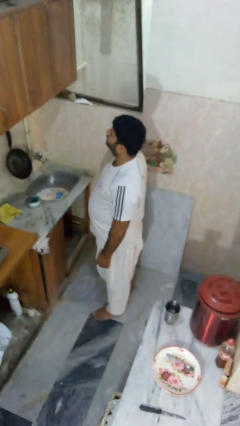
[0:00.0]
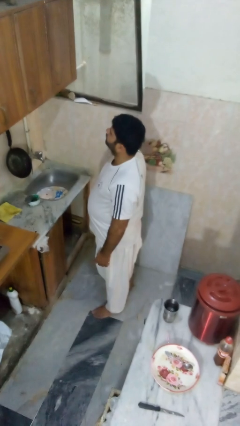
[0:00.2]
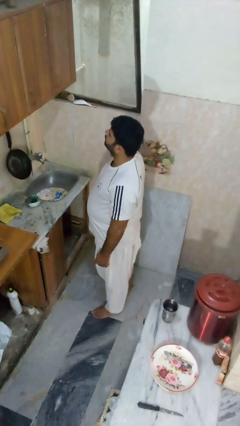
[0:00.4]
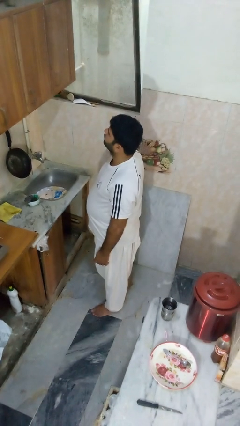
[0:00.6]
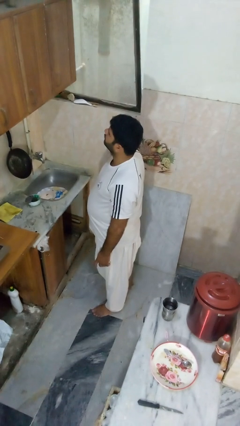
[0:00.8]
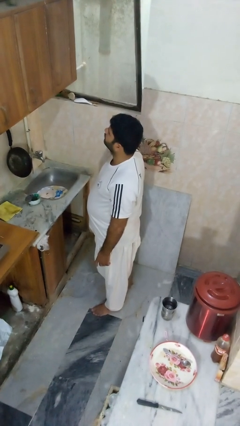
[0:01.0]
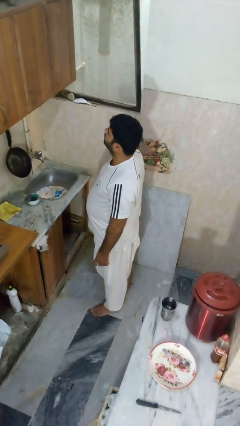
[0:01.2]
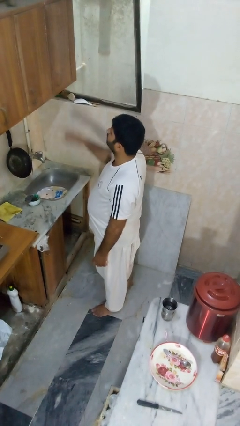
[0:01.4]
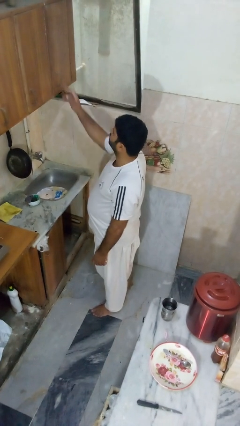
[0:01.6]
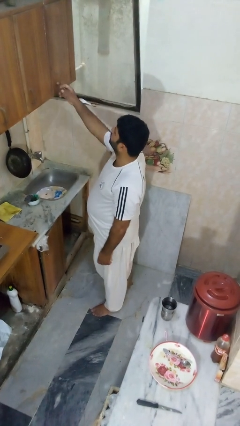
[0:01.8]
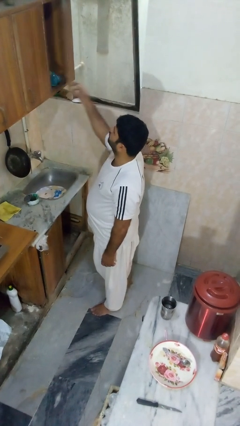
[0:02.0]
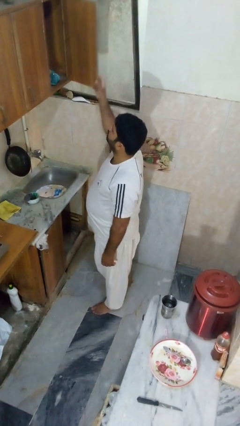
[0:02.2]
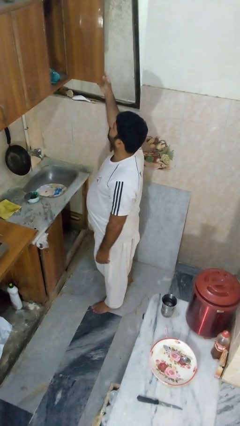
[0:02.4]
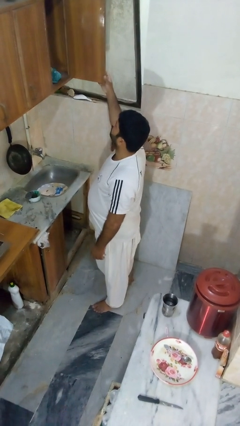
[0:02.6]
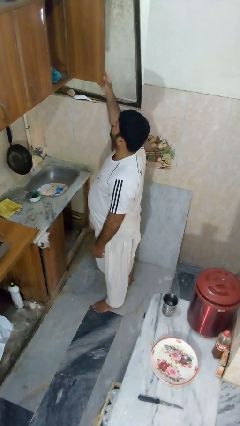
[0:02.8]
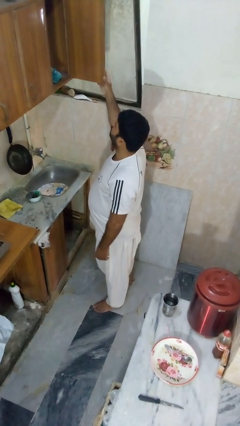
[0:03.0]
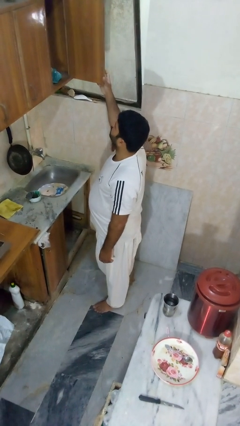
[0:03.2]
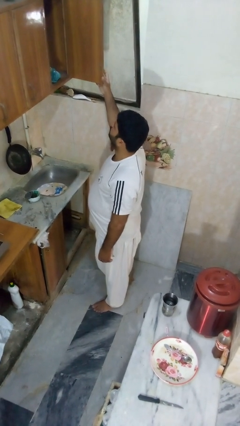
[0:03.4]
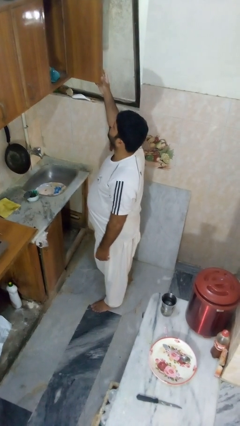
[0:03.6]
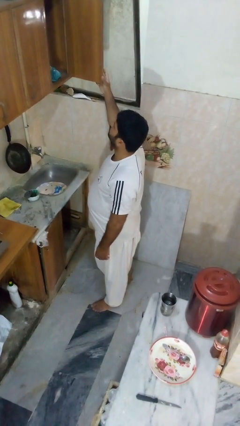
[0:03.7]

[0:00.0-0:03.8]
person opens cabinet

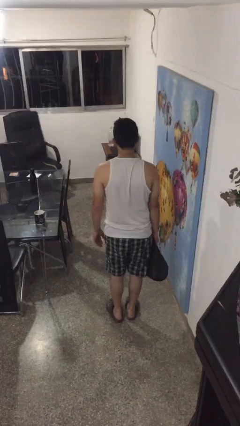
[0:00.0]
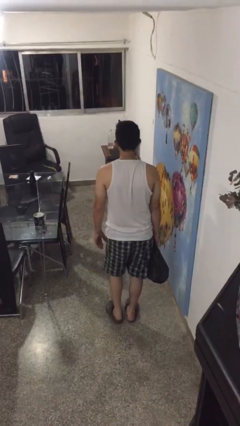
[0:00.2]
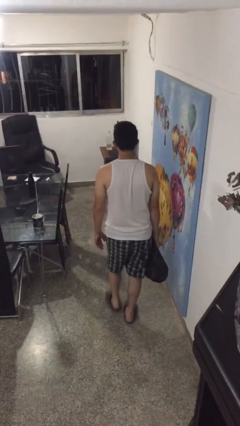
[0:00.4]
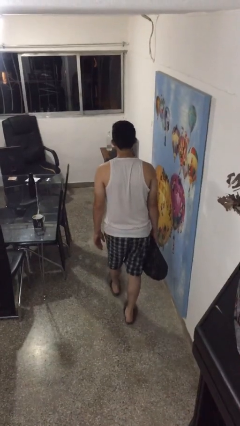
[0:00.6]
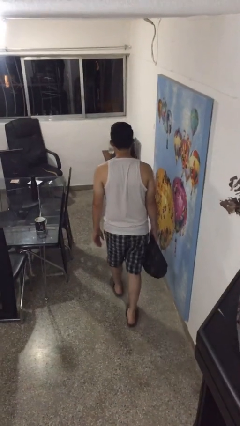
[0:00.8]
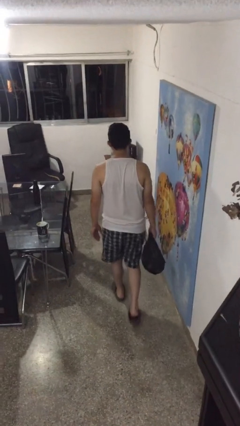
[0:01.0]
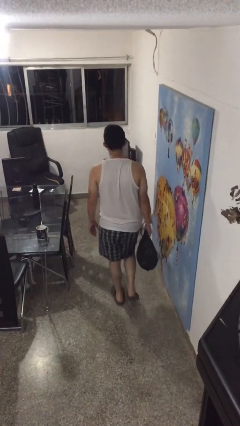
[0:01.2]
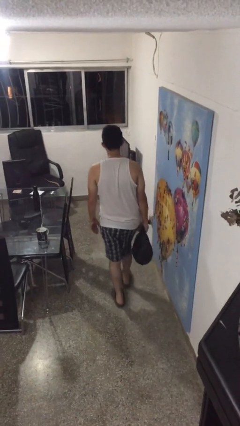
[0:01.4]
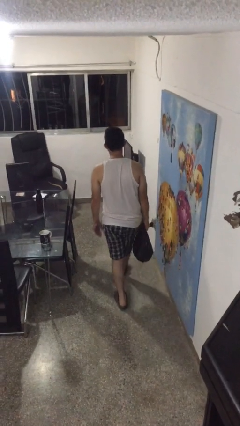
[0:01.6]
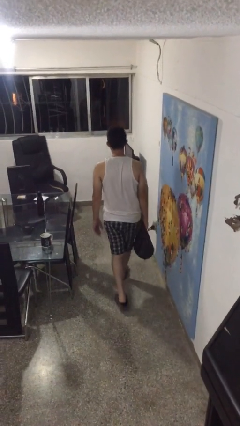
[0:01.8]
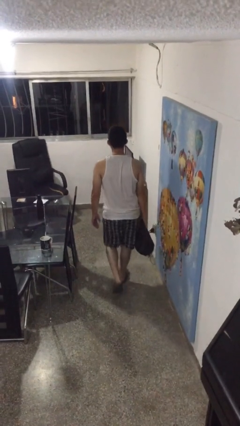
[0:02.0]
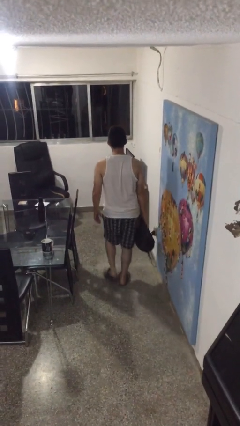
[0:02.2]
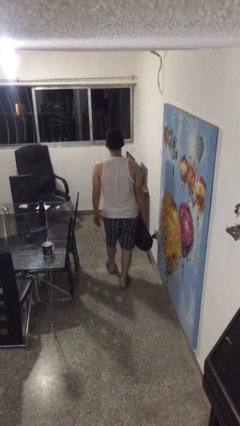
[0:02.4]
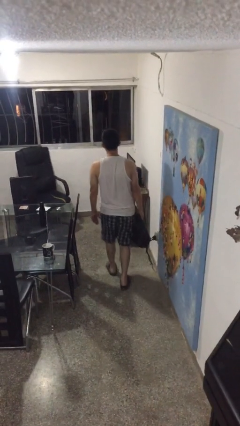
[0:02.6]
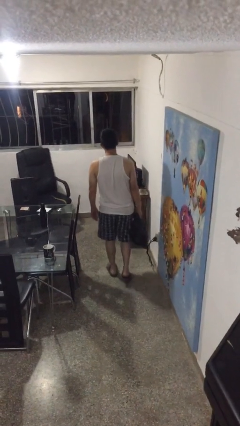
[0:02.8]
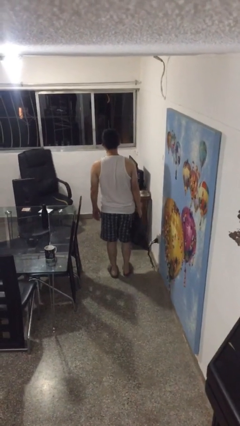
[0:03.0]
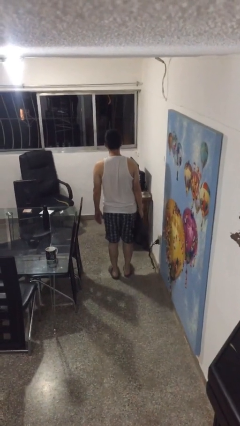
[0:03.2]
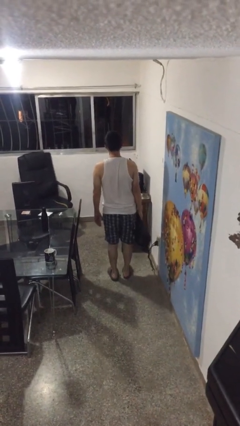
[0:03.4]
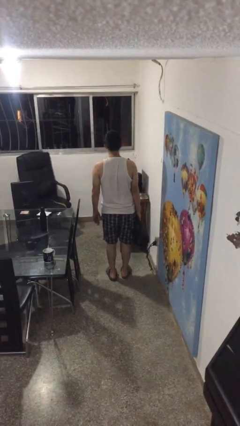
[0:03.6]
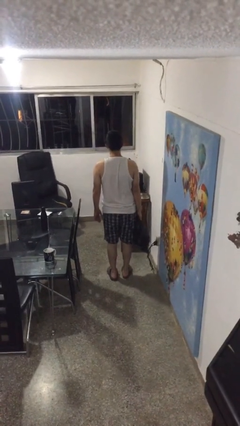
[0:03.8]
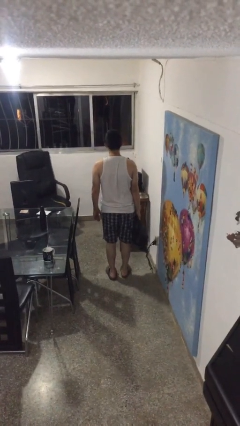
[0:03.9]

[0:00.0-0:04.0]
person carries groceries

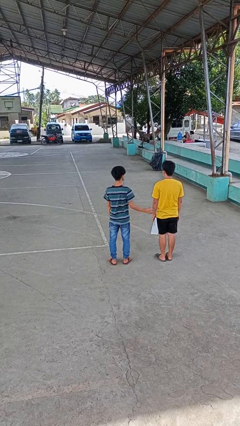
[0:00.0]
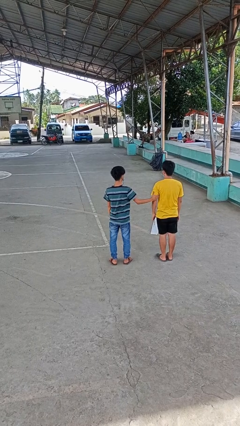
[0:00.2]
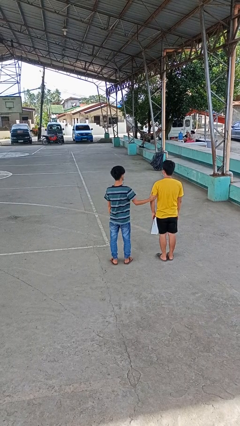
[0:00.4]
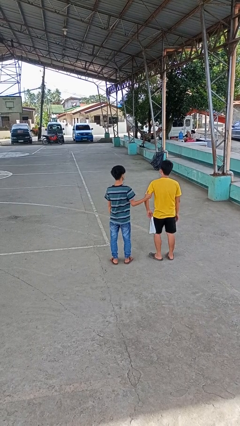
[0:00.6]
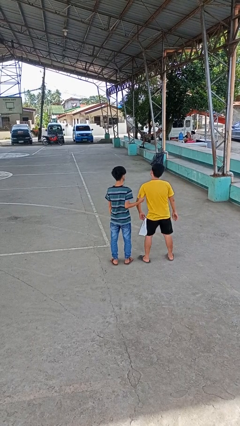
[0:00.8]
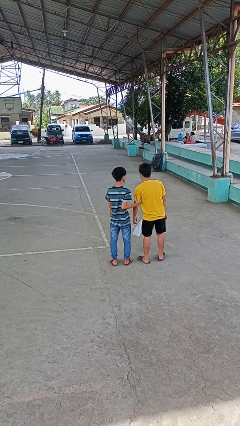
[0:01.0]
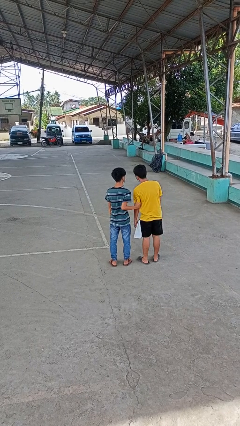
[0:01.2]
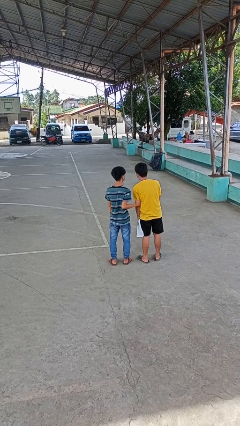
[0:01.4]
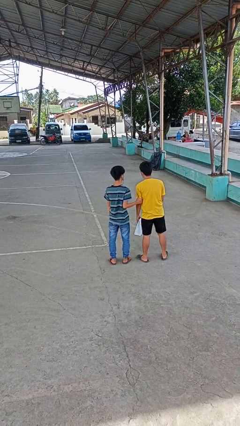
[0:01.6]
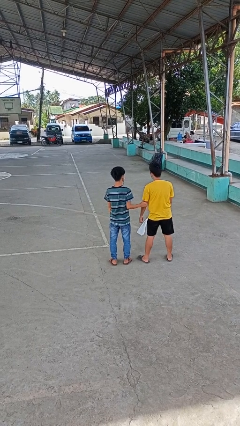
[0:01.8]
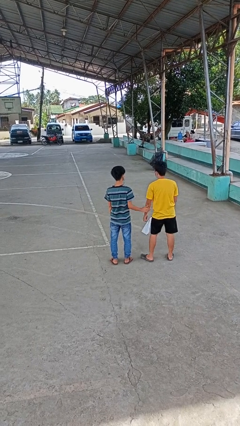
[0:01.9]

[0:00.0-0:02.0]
person grabs person by bicep

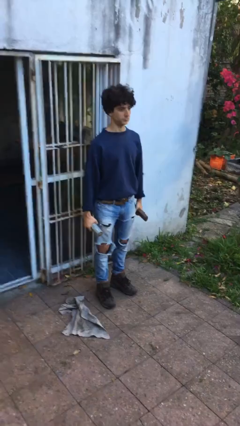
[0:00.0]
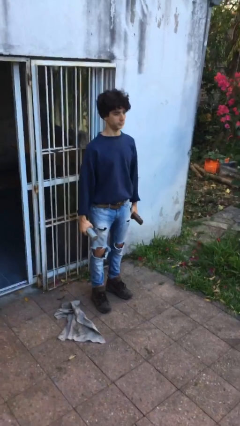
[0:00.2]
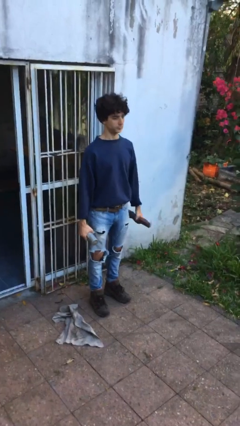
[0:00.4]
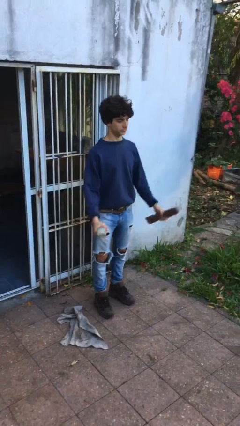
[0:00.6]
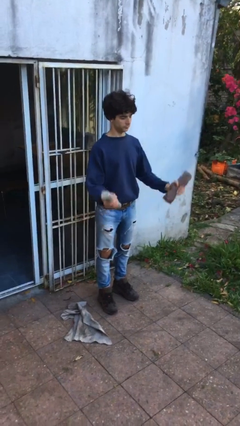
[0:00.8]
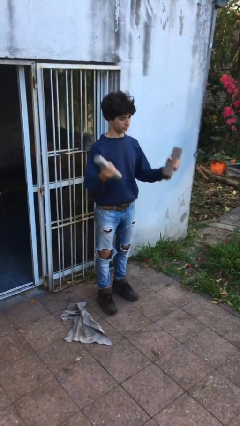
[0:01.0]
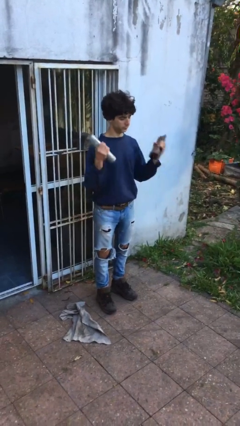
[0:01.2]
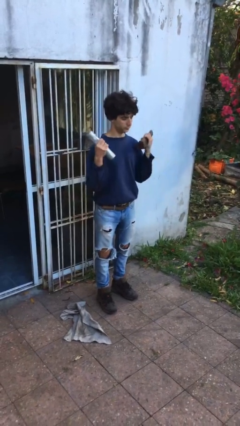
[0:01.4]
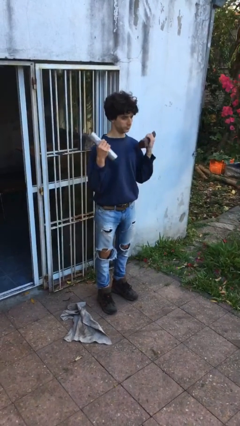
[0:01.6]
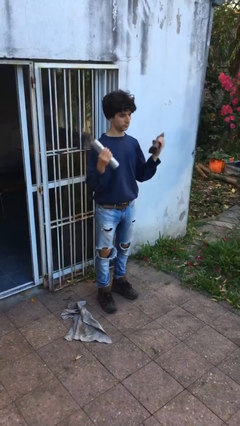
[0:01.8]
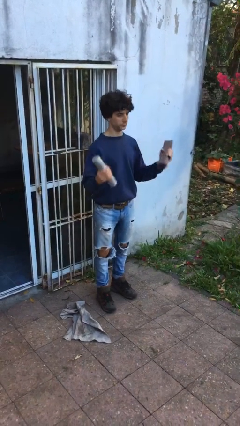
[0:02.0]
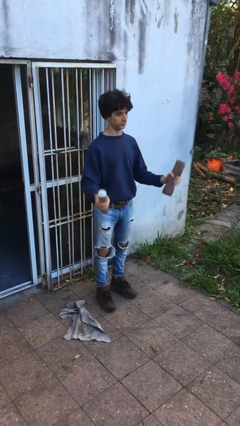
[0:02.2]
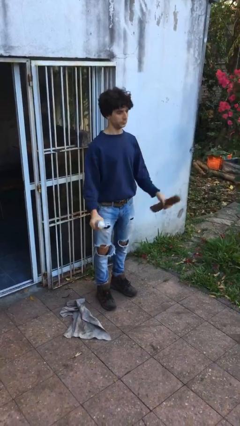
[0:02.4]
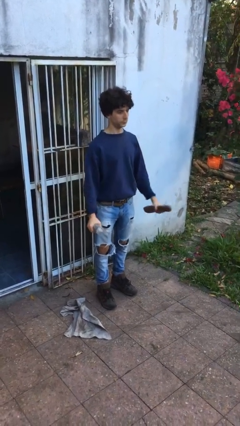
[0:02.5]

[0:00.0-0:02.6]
person lifts dumbbells

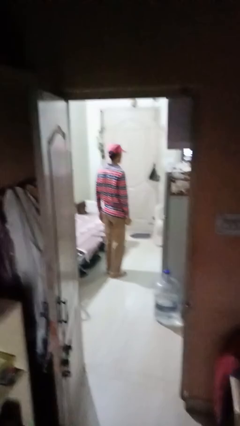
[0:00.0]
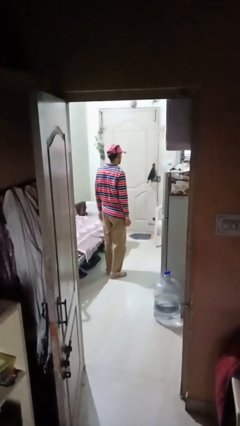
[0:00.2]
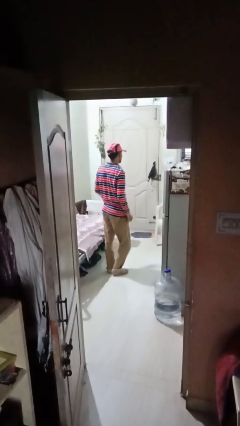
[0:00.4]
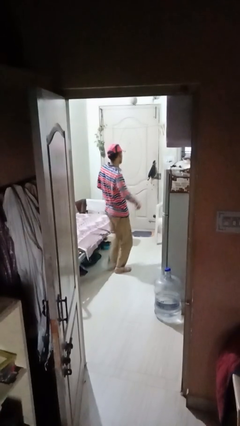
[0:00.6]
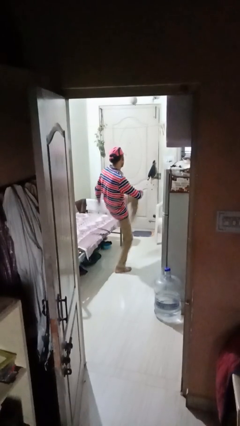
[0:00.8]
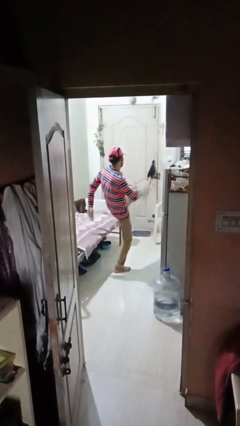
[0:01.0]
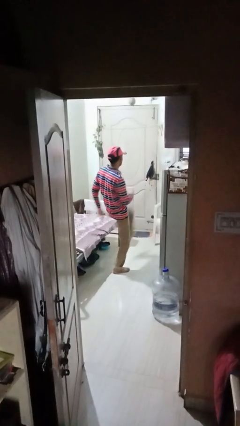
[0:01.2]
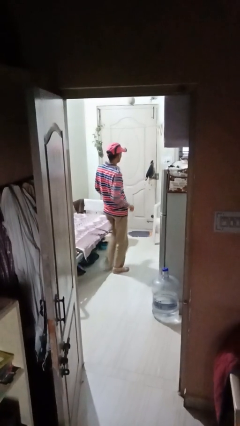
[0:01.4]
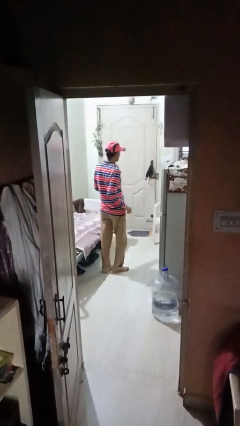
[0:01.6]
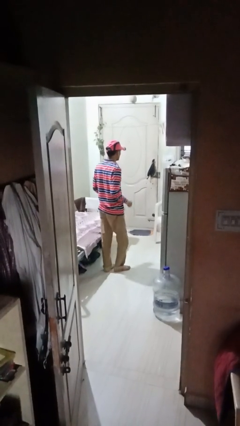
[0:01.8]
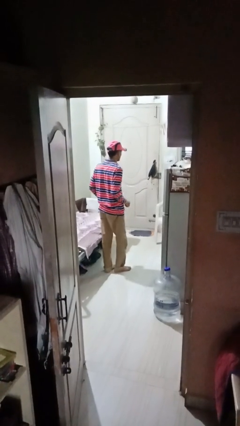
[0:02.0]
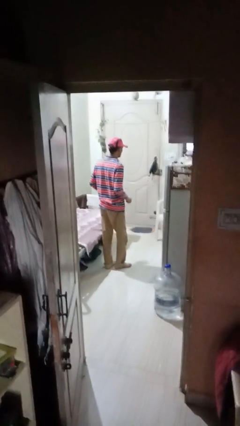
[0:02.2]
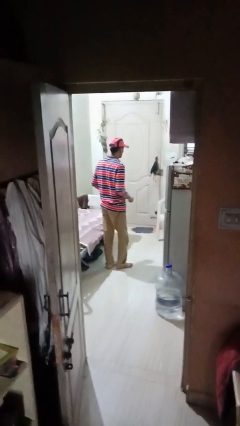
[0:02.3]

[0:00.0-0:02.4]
person karate kicks

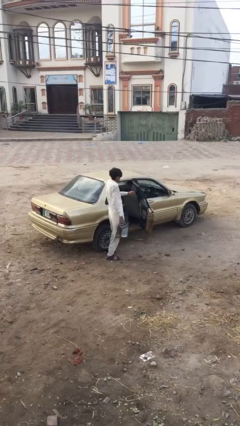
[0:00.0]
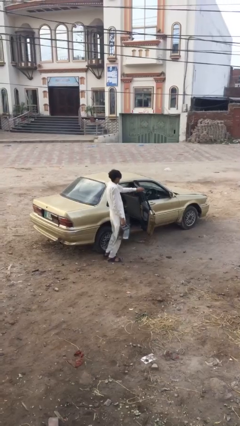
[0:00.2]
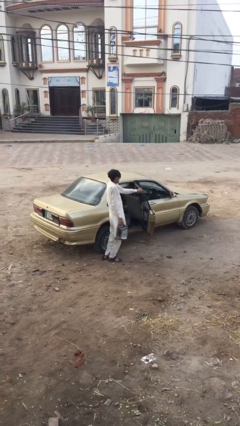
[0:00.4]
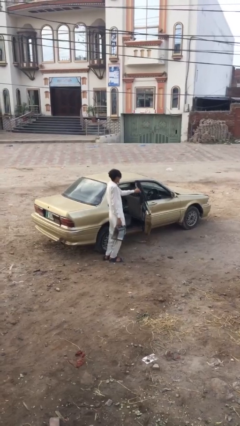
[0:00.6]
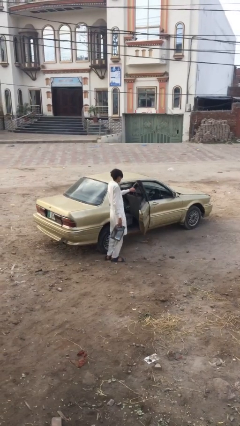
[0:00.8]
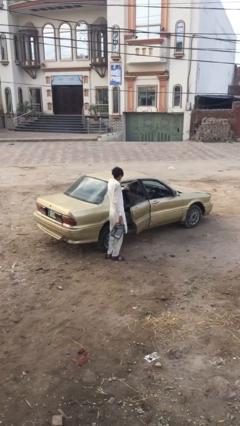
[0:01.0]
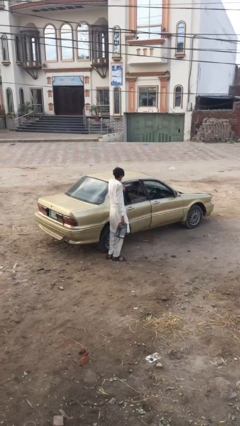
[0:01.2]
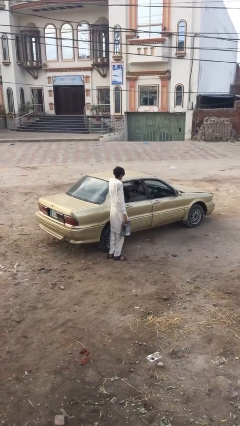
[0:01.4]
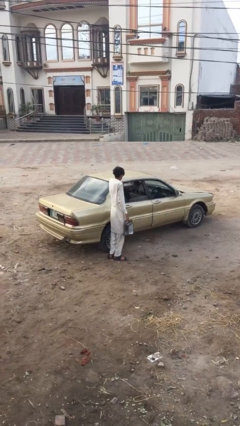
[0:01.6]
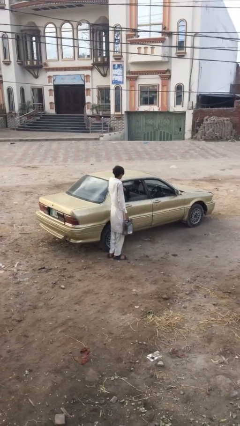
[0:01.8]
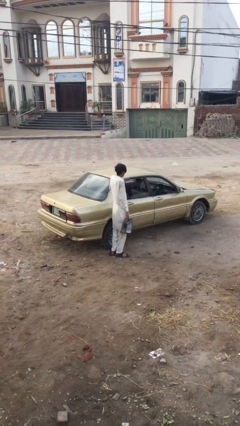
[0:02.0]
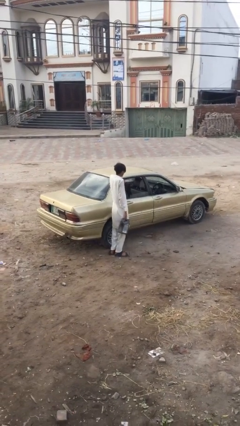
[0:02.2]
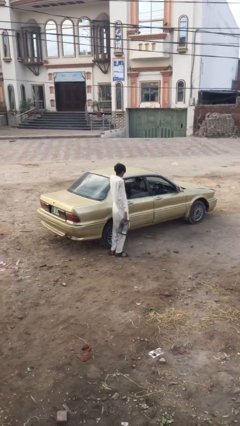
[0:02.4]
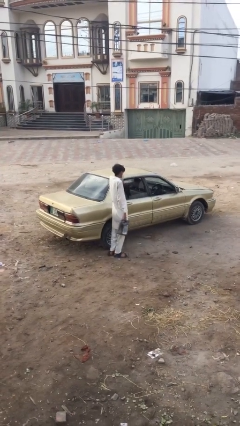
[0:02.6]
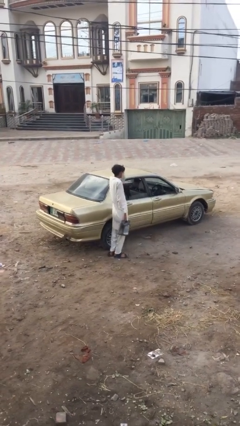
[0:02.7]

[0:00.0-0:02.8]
person closes car door
